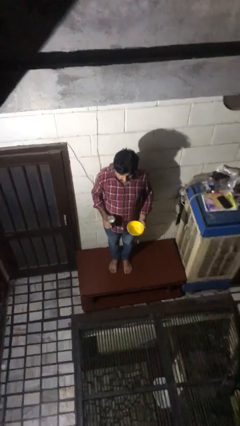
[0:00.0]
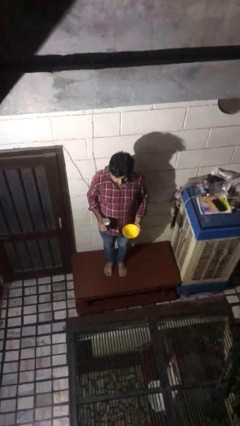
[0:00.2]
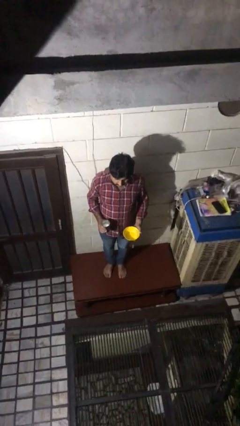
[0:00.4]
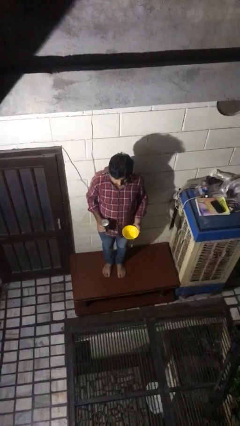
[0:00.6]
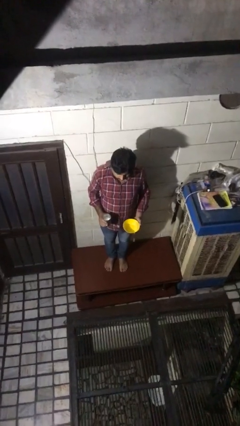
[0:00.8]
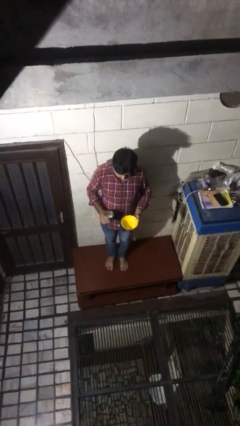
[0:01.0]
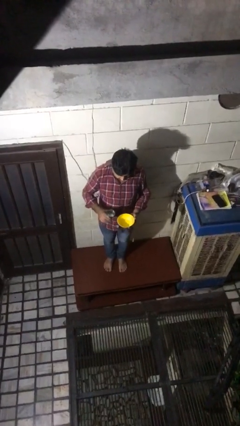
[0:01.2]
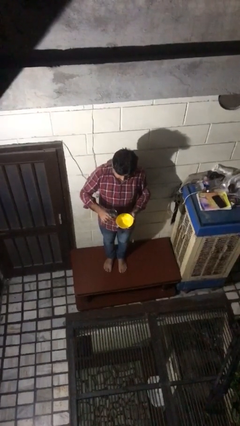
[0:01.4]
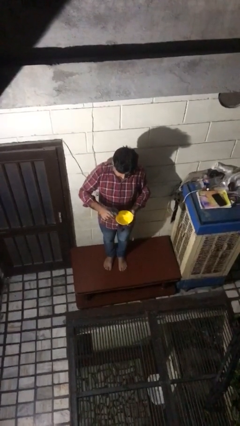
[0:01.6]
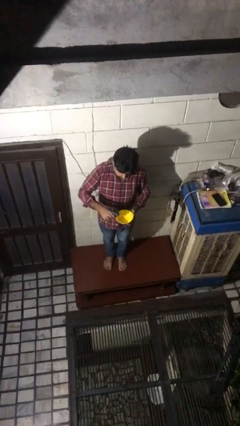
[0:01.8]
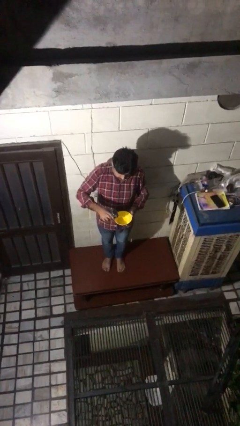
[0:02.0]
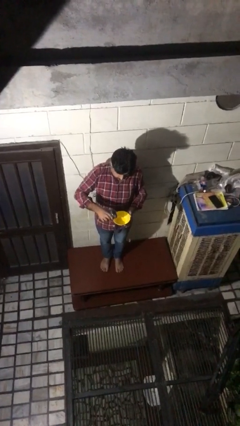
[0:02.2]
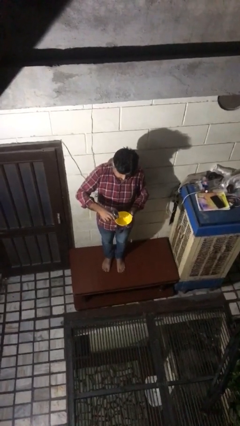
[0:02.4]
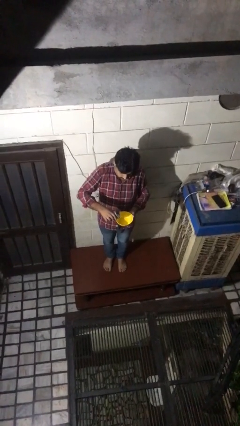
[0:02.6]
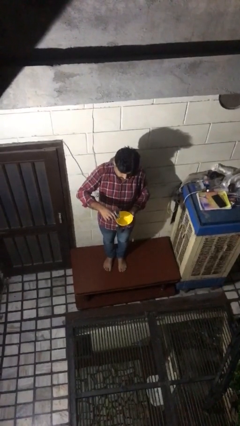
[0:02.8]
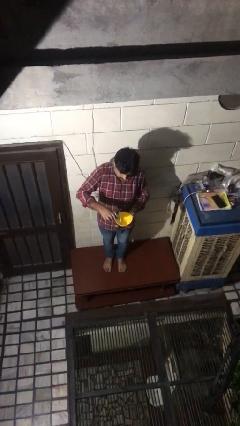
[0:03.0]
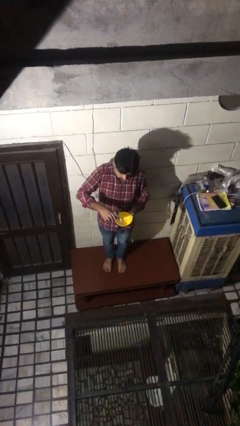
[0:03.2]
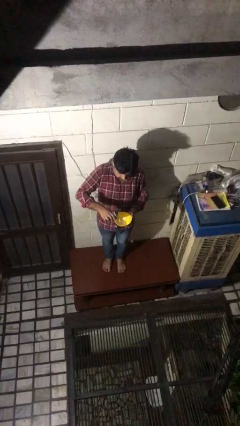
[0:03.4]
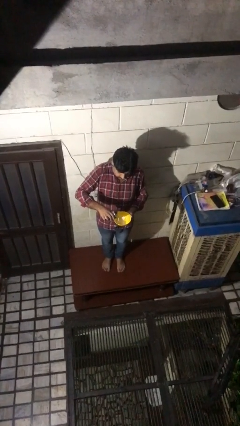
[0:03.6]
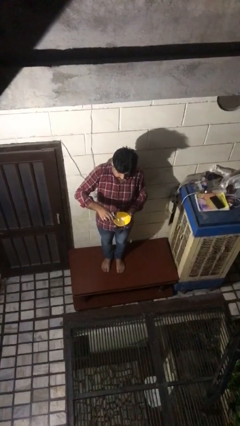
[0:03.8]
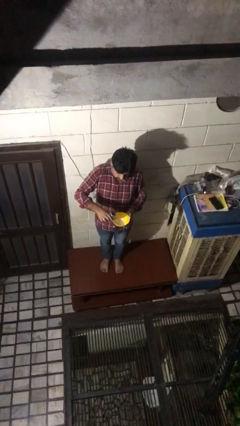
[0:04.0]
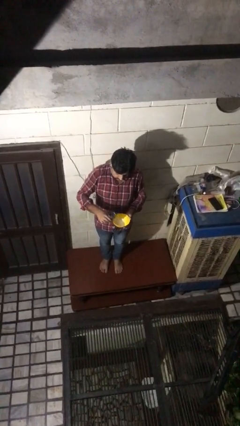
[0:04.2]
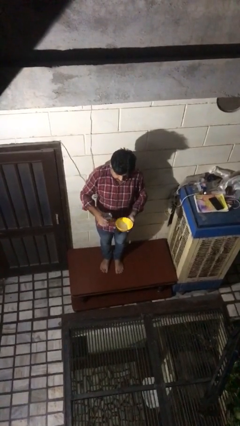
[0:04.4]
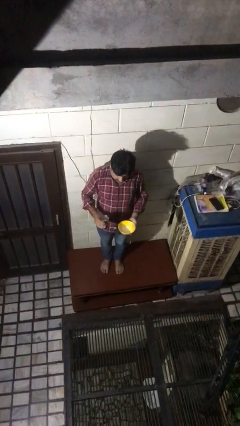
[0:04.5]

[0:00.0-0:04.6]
person pours into bowl

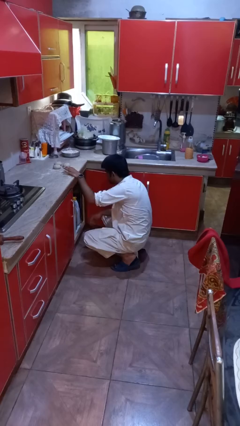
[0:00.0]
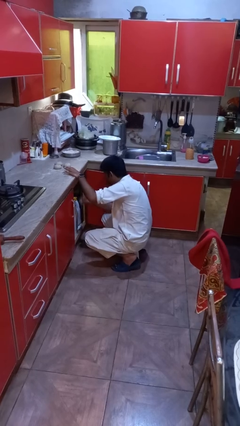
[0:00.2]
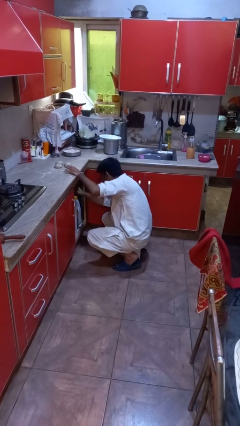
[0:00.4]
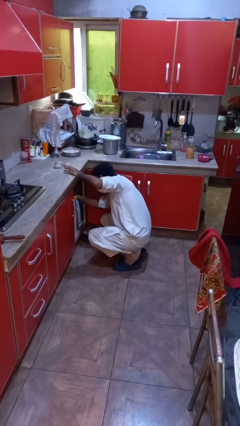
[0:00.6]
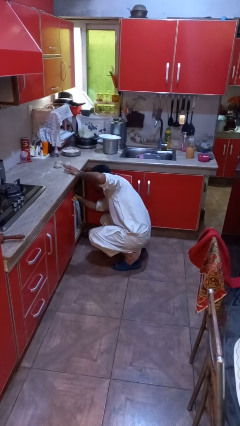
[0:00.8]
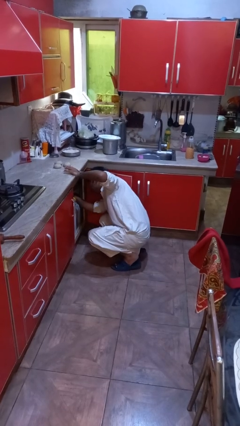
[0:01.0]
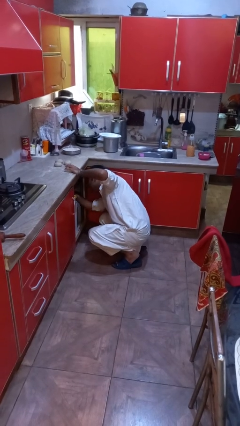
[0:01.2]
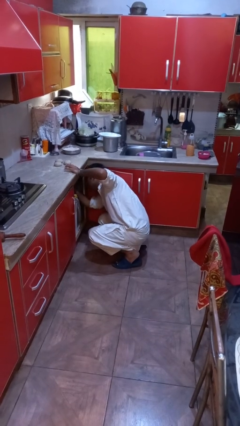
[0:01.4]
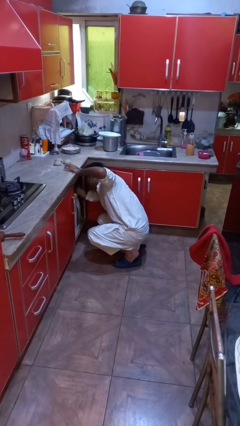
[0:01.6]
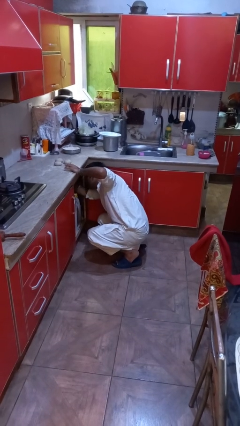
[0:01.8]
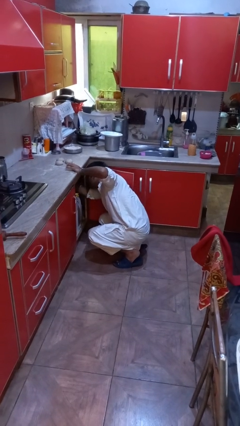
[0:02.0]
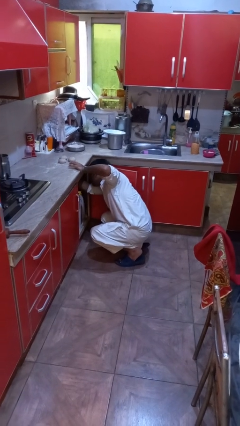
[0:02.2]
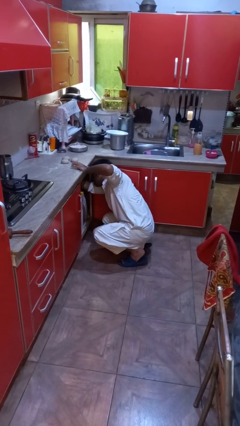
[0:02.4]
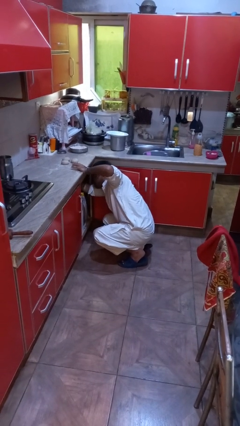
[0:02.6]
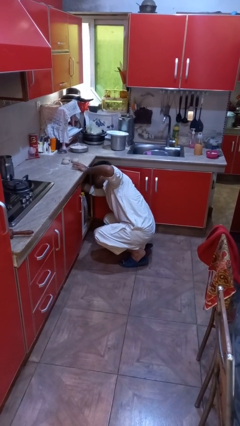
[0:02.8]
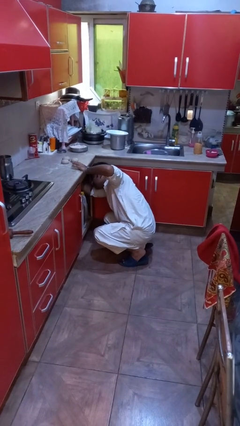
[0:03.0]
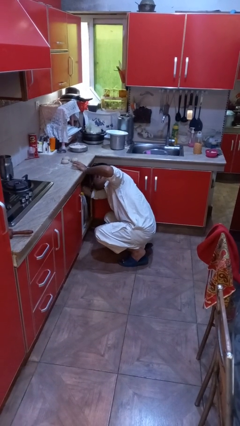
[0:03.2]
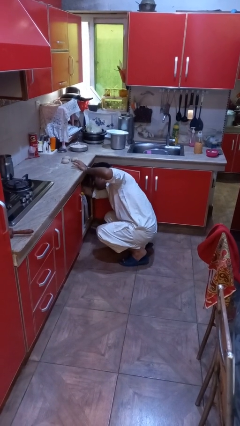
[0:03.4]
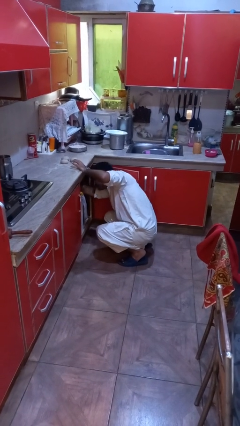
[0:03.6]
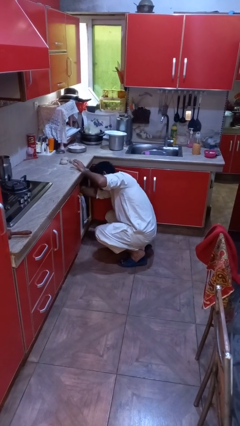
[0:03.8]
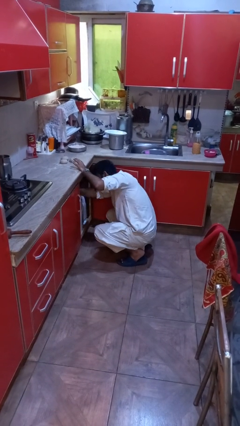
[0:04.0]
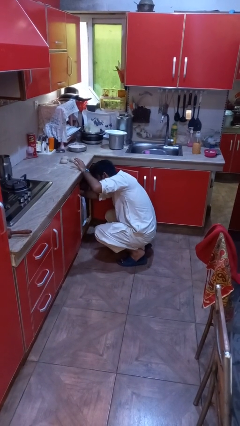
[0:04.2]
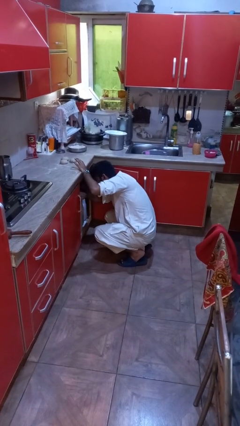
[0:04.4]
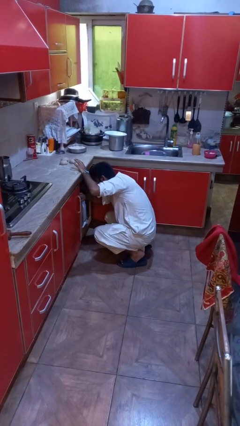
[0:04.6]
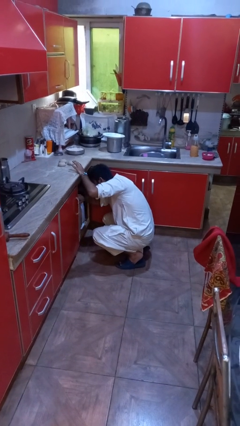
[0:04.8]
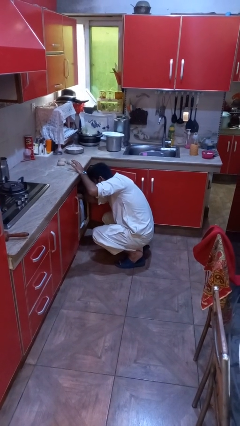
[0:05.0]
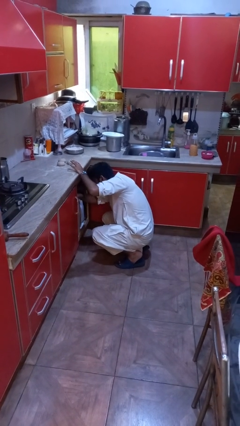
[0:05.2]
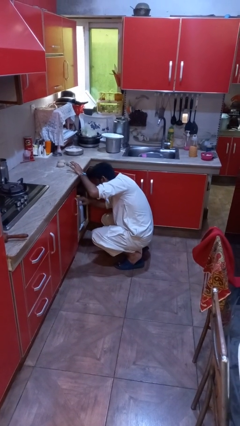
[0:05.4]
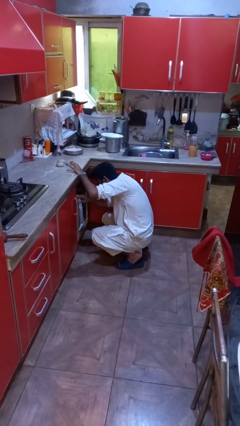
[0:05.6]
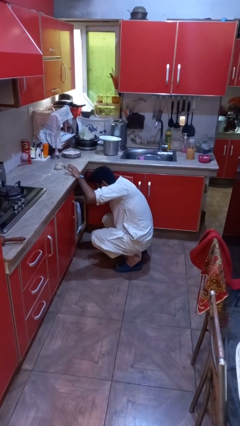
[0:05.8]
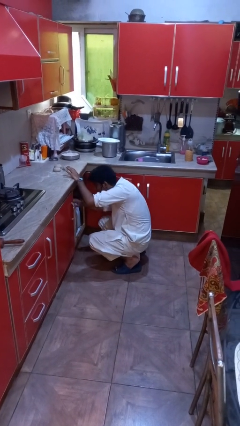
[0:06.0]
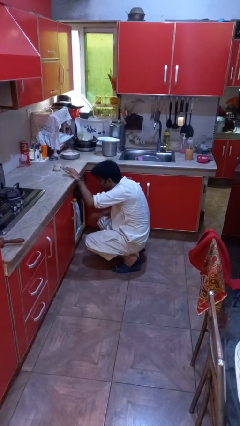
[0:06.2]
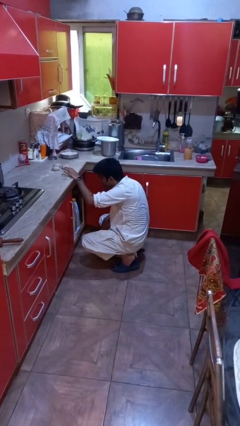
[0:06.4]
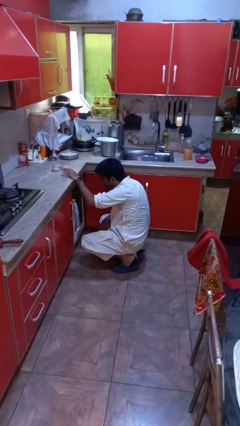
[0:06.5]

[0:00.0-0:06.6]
person searches in cabinet

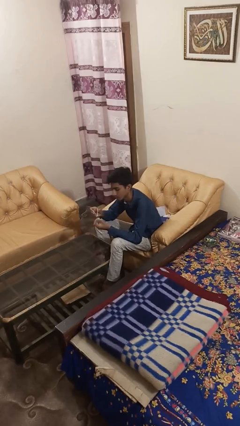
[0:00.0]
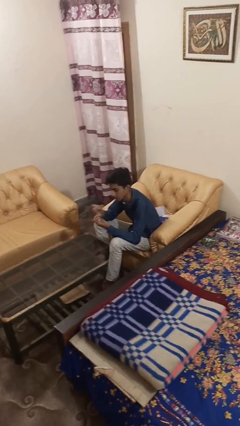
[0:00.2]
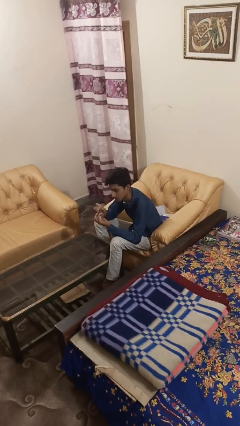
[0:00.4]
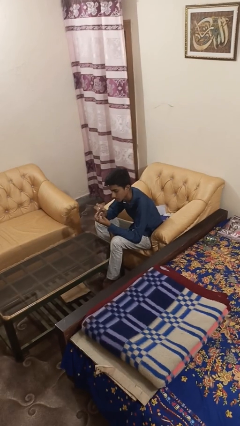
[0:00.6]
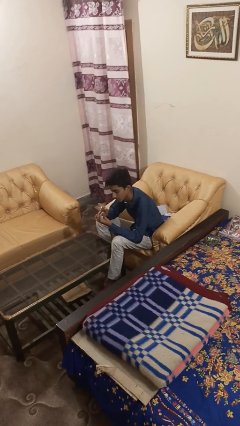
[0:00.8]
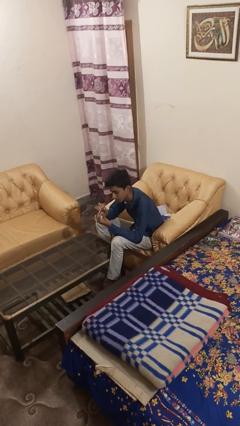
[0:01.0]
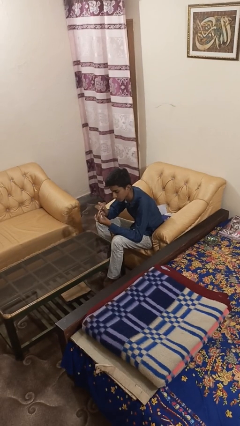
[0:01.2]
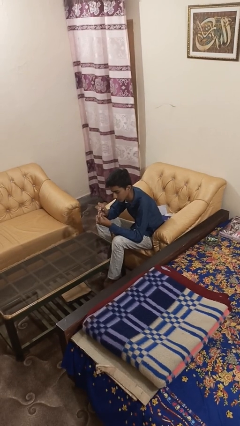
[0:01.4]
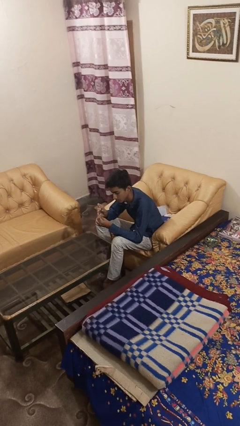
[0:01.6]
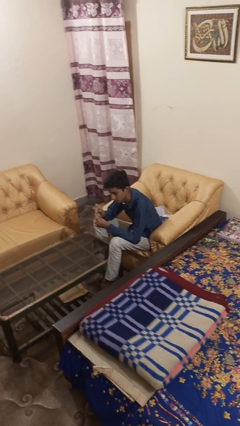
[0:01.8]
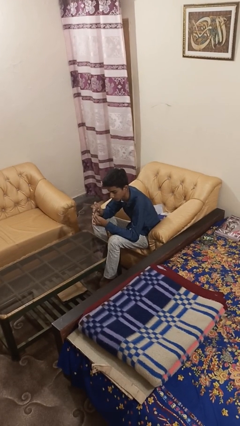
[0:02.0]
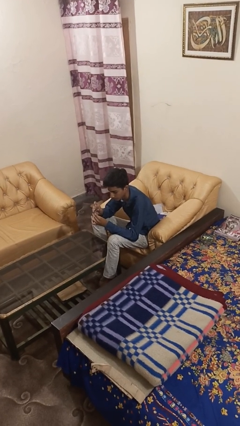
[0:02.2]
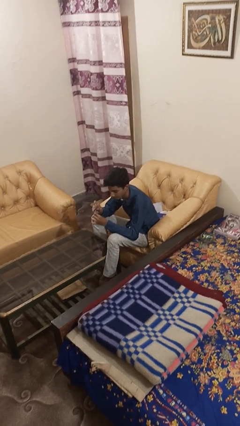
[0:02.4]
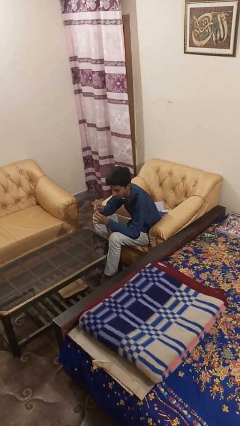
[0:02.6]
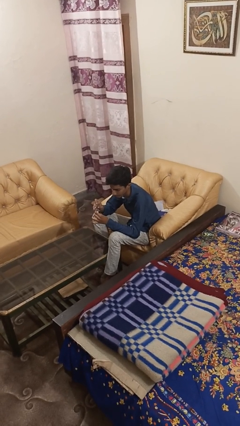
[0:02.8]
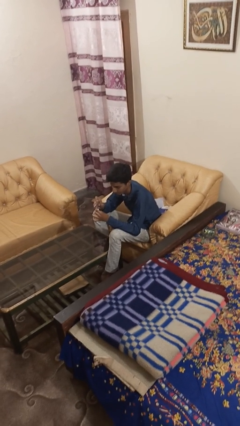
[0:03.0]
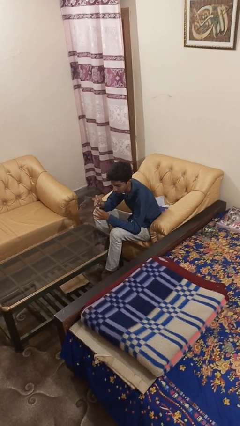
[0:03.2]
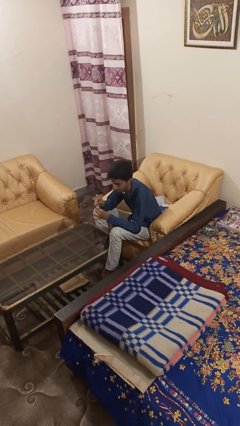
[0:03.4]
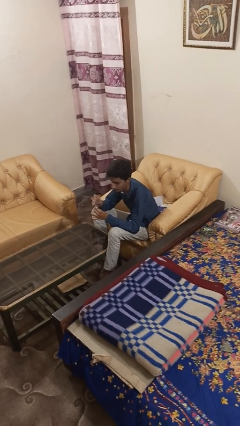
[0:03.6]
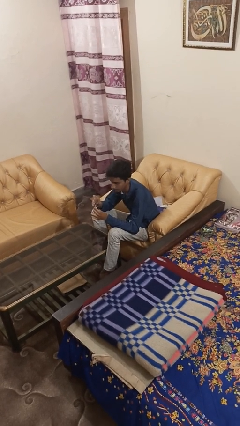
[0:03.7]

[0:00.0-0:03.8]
person clips fingernails

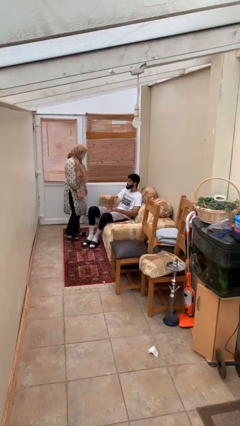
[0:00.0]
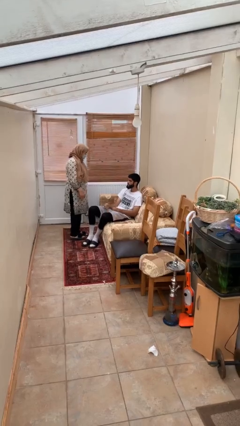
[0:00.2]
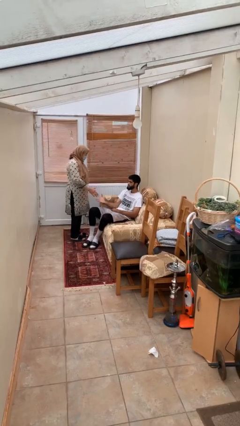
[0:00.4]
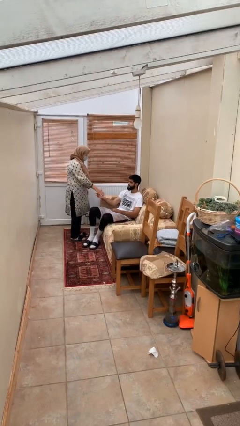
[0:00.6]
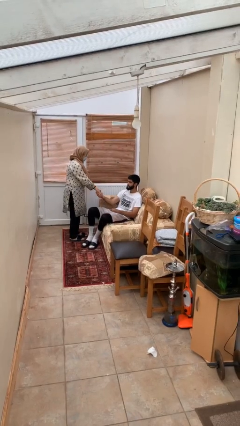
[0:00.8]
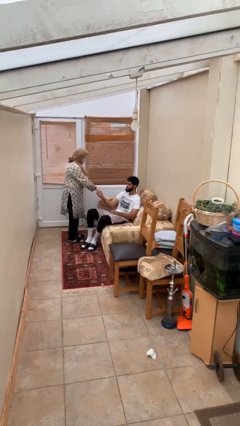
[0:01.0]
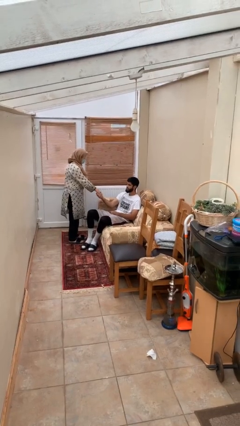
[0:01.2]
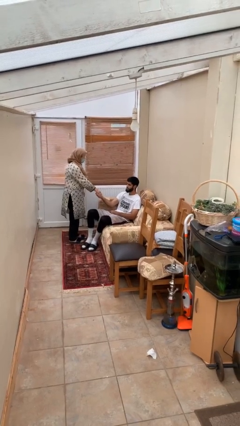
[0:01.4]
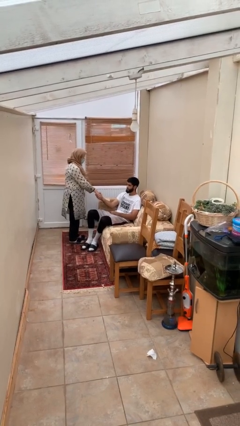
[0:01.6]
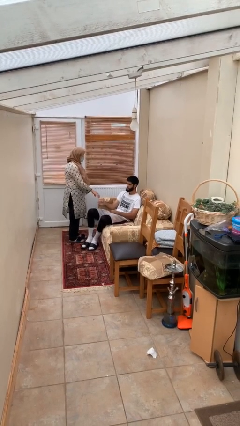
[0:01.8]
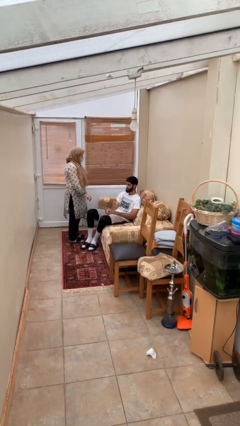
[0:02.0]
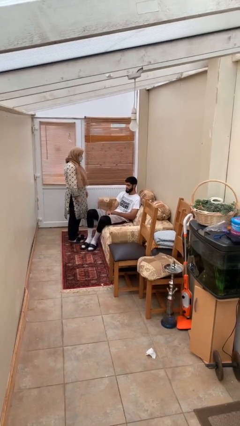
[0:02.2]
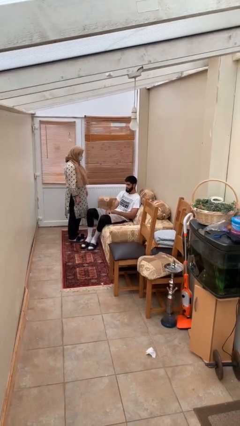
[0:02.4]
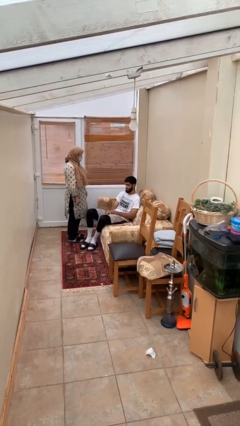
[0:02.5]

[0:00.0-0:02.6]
person shakes hand
